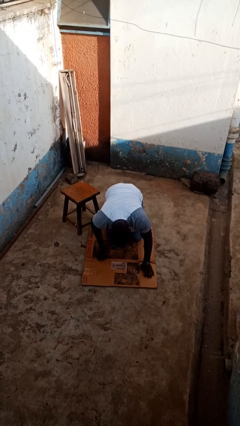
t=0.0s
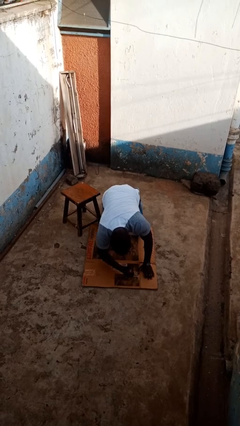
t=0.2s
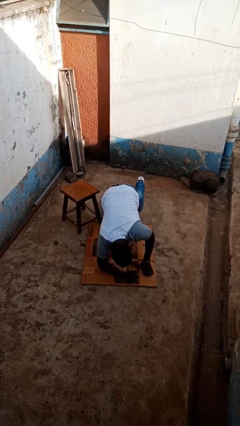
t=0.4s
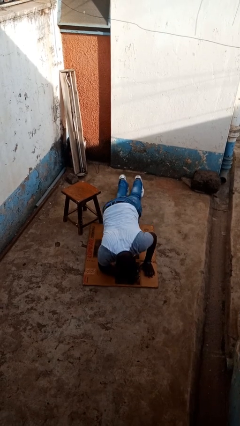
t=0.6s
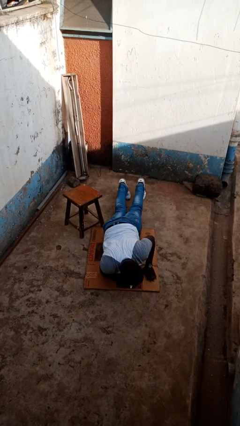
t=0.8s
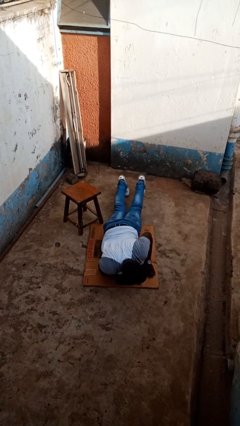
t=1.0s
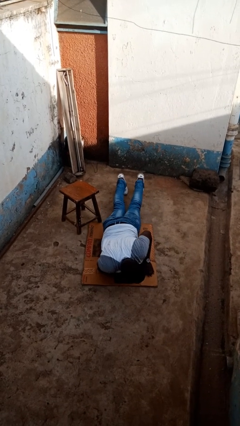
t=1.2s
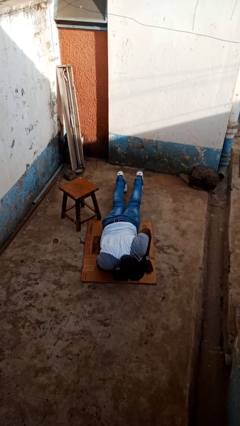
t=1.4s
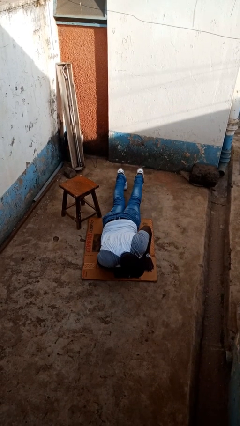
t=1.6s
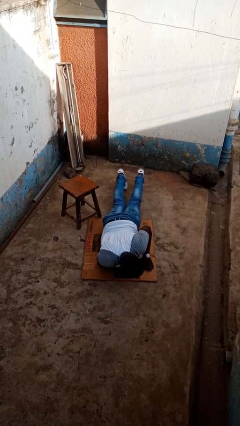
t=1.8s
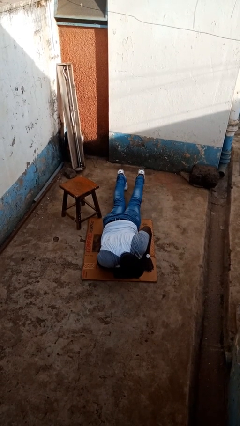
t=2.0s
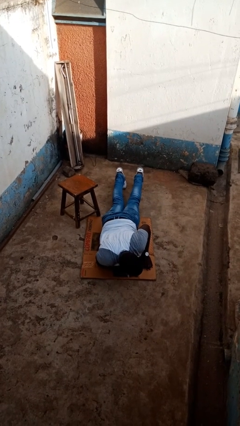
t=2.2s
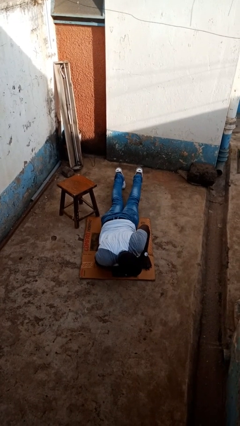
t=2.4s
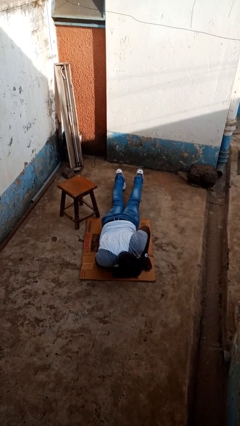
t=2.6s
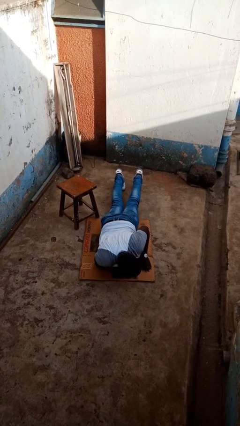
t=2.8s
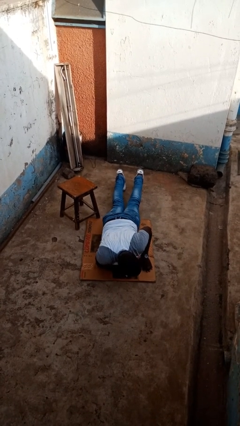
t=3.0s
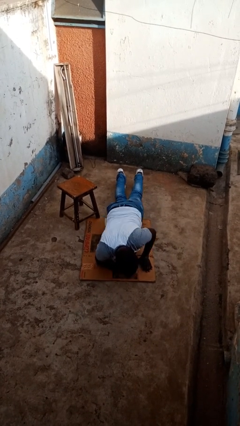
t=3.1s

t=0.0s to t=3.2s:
person lies down on floor

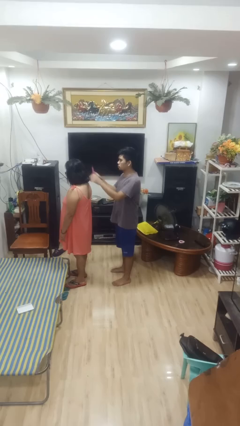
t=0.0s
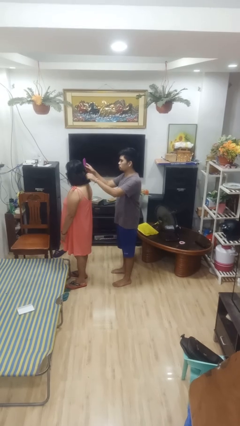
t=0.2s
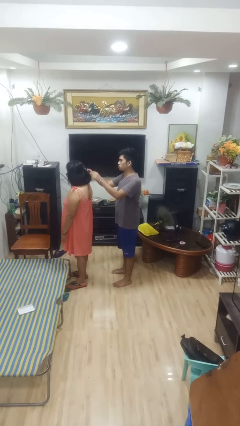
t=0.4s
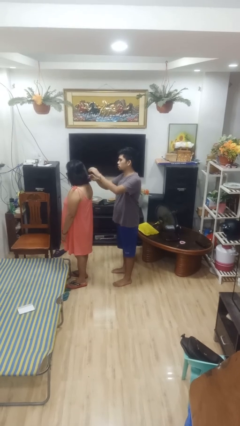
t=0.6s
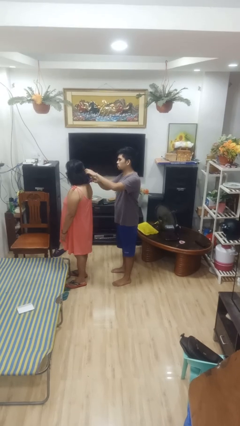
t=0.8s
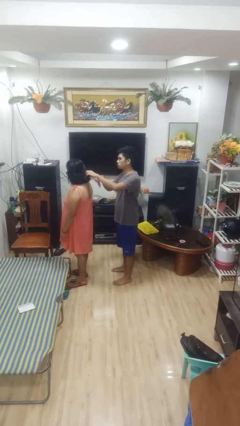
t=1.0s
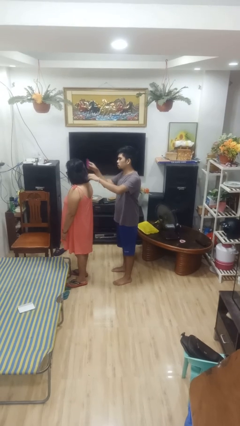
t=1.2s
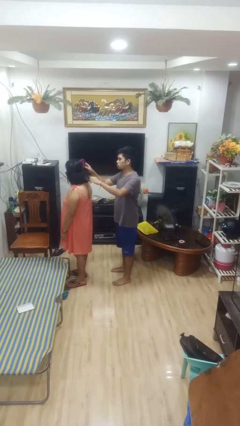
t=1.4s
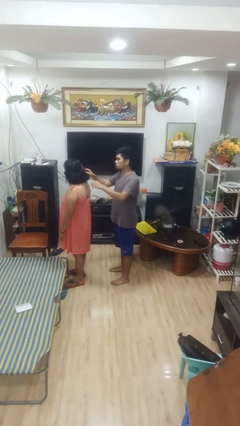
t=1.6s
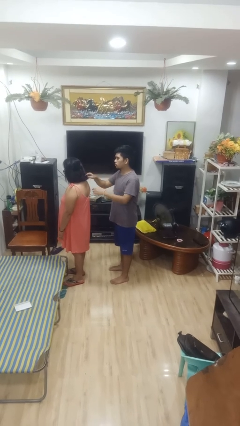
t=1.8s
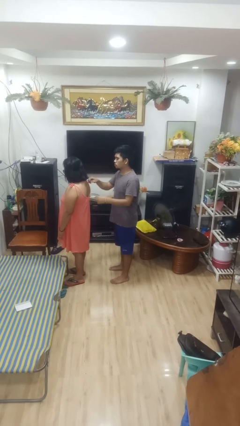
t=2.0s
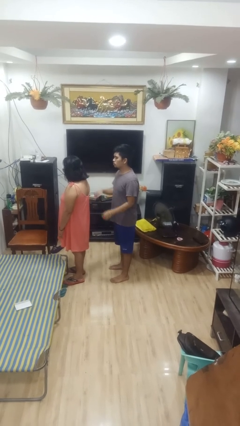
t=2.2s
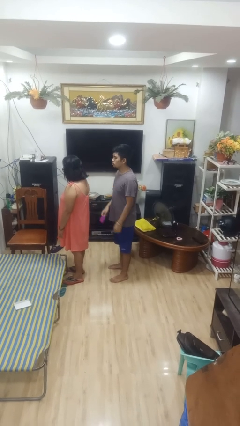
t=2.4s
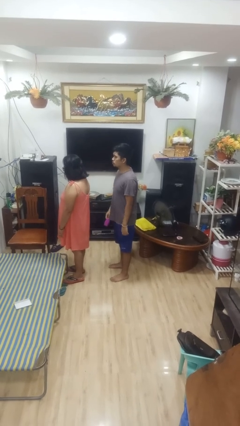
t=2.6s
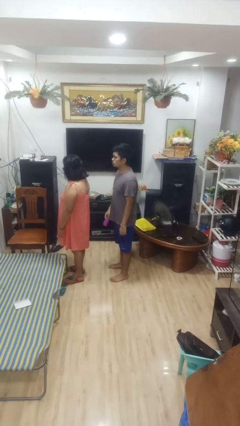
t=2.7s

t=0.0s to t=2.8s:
person brushes hair of person

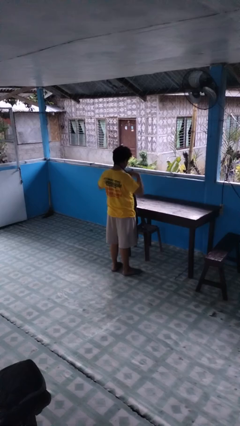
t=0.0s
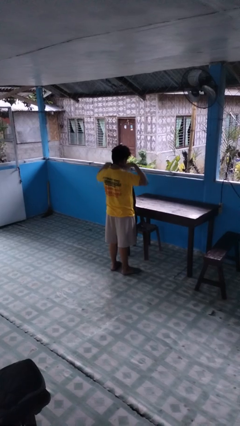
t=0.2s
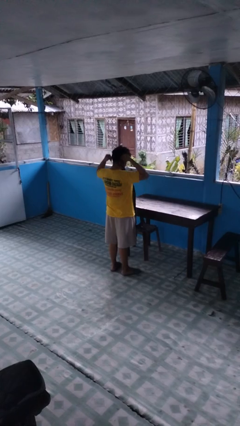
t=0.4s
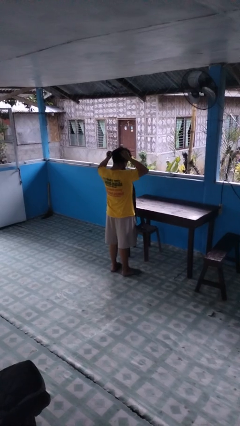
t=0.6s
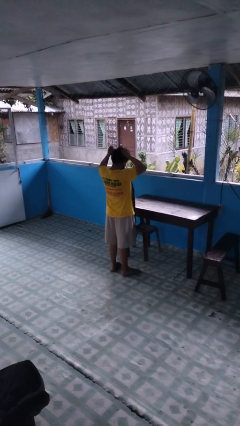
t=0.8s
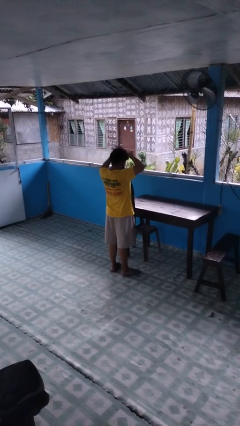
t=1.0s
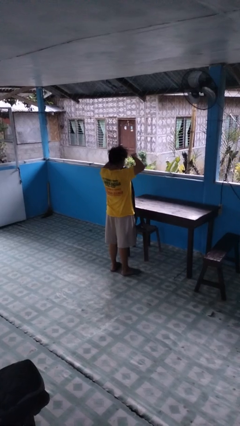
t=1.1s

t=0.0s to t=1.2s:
person takes off apron

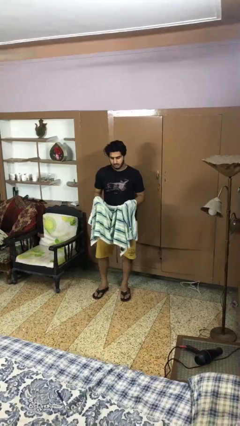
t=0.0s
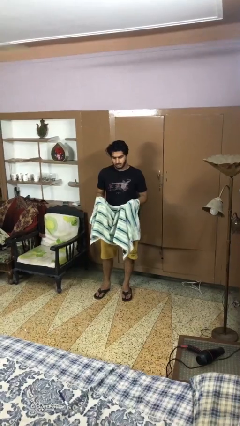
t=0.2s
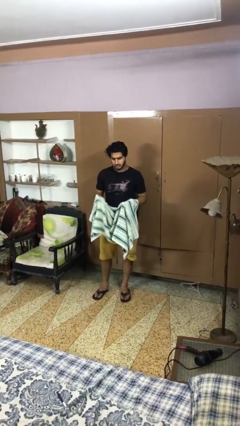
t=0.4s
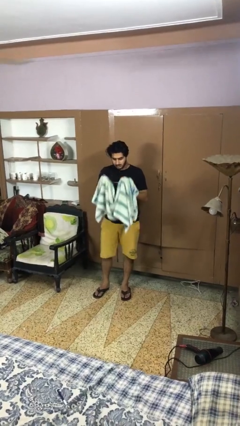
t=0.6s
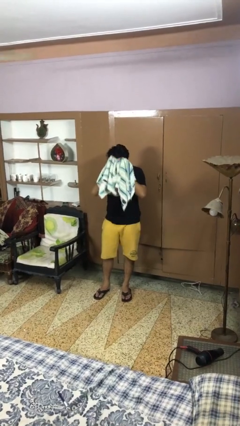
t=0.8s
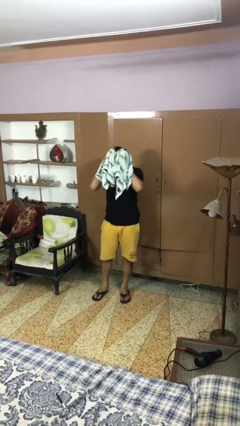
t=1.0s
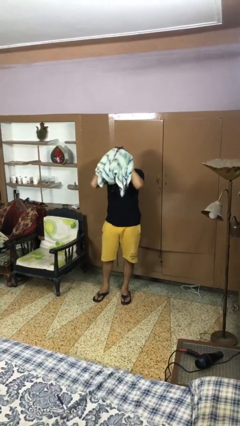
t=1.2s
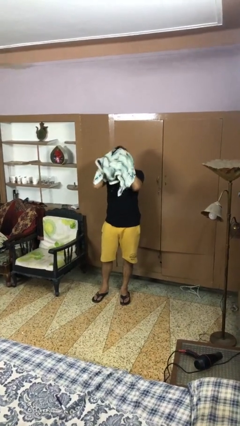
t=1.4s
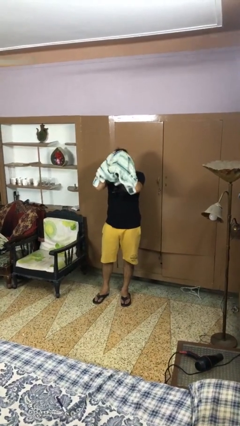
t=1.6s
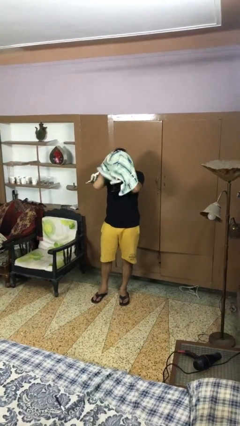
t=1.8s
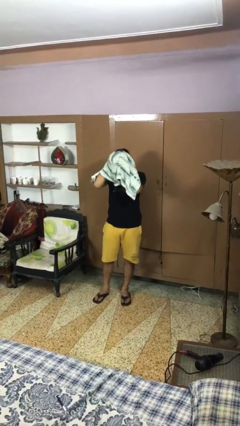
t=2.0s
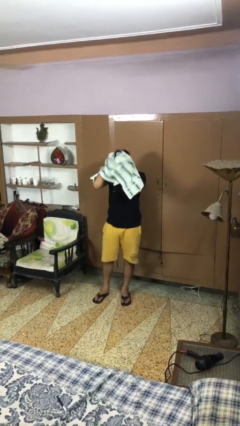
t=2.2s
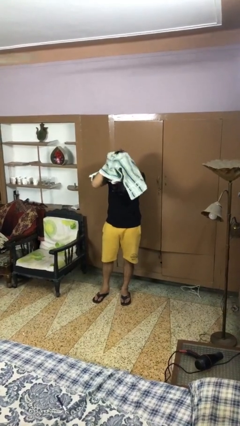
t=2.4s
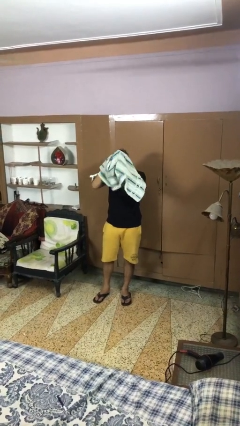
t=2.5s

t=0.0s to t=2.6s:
person dries hair with towel

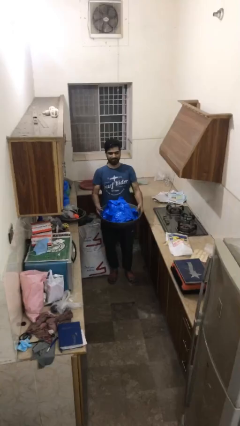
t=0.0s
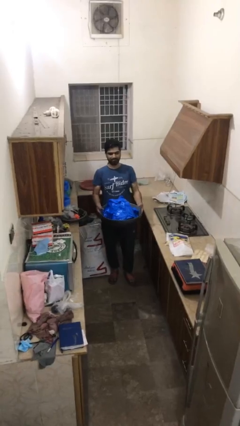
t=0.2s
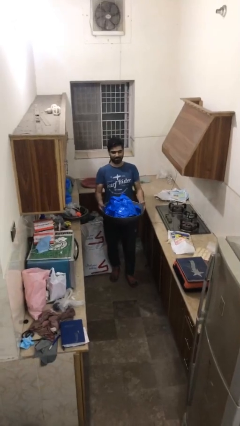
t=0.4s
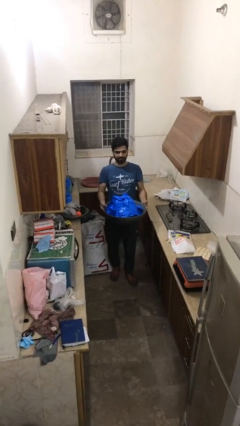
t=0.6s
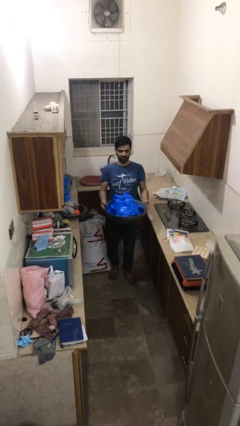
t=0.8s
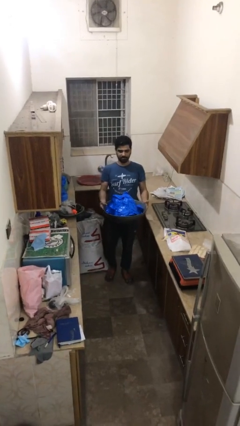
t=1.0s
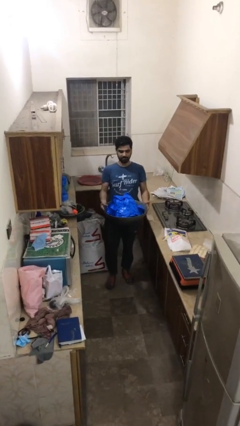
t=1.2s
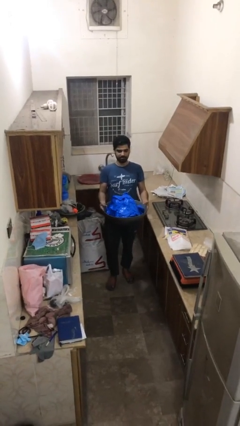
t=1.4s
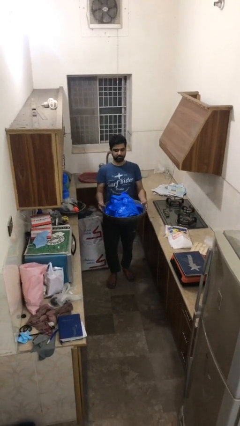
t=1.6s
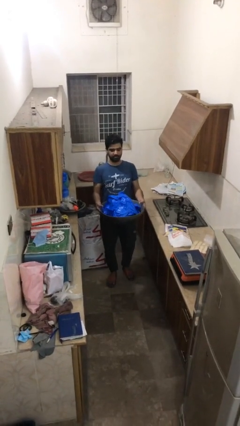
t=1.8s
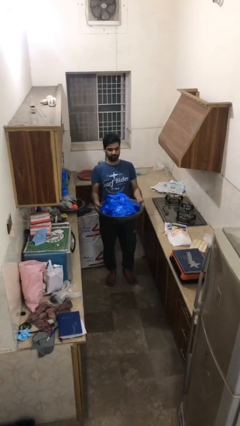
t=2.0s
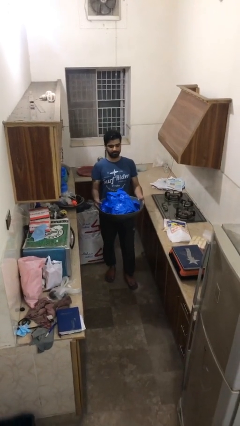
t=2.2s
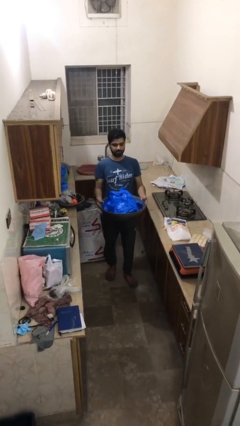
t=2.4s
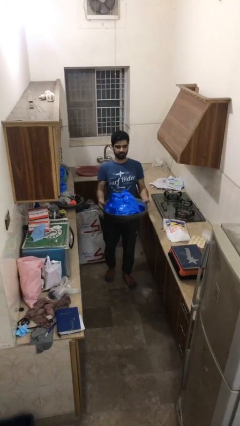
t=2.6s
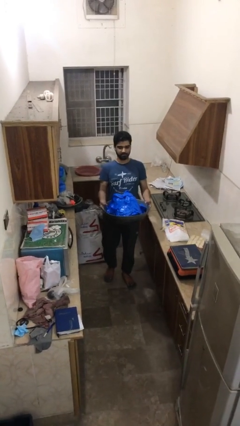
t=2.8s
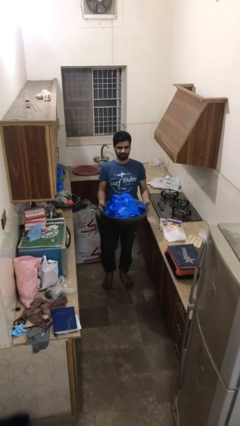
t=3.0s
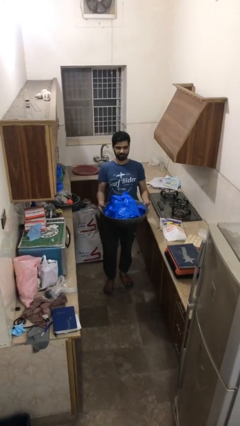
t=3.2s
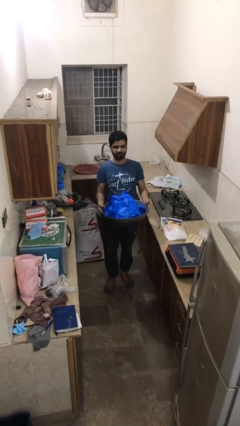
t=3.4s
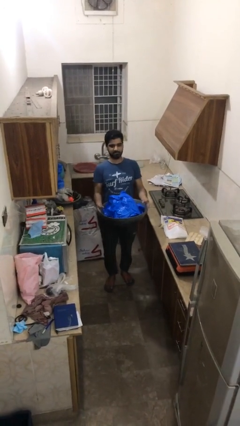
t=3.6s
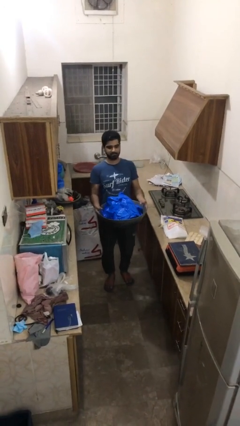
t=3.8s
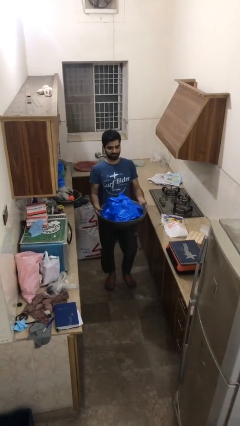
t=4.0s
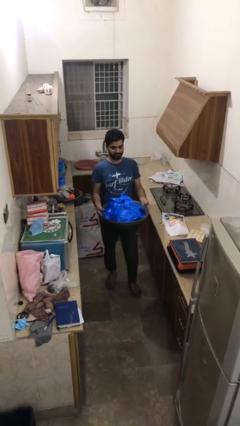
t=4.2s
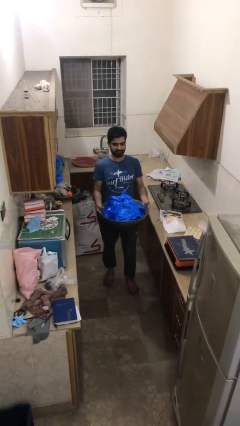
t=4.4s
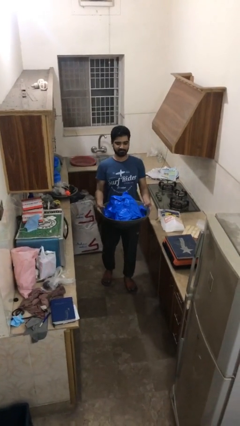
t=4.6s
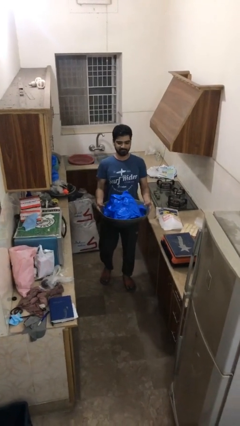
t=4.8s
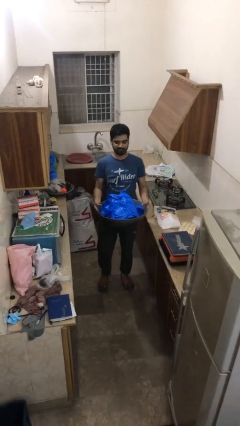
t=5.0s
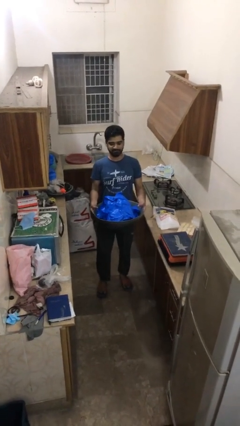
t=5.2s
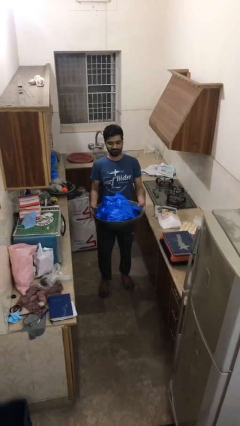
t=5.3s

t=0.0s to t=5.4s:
person carries heavy object

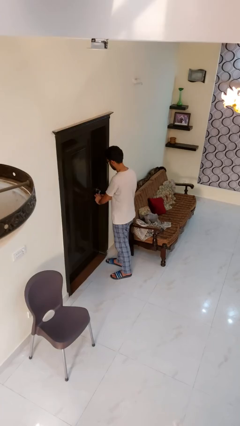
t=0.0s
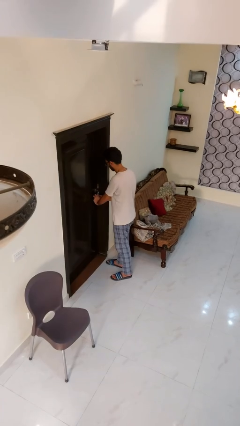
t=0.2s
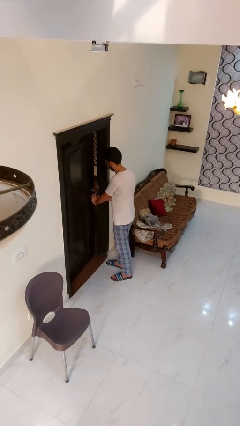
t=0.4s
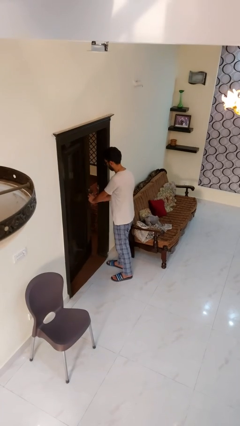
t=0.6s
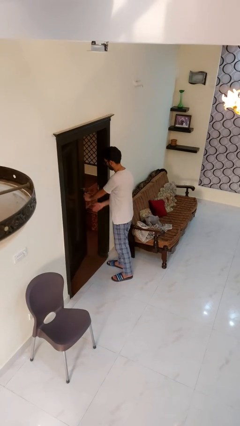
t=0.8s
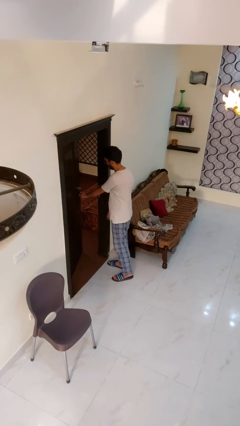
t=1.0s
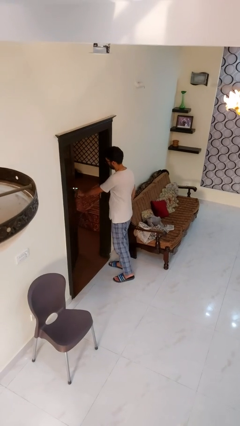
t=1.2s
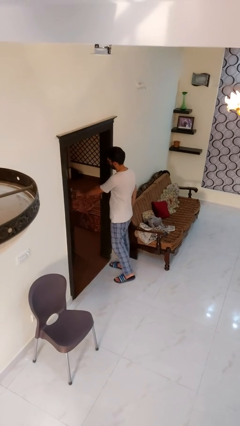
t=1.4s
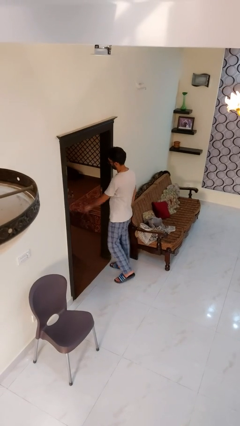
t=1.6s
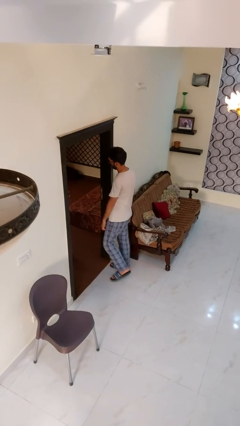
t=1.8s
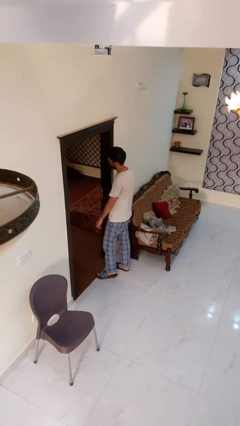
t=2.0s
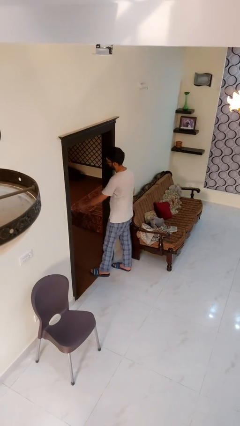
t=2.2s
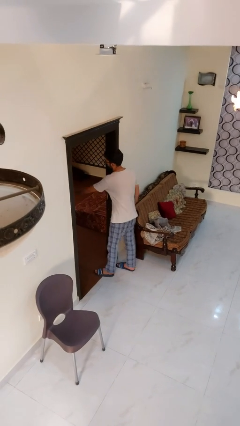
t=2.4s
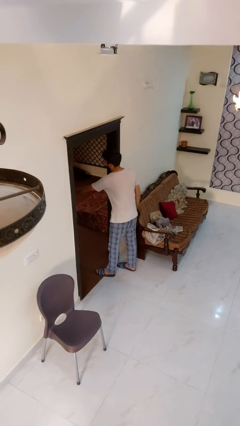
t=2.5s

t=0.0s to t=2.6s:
person opens facility door
